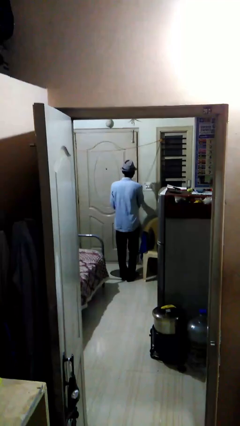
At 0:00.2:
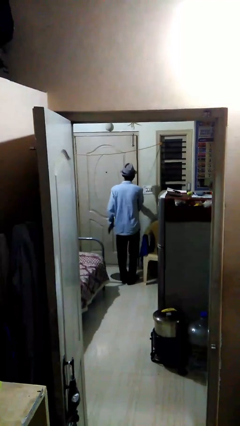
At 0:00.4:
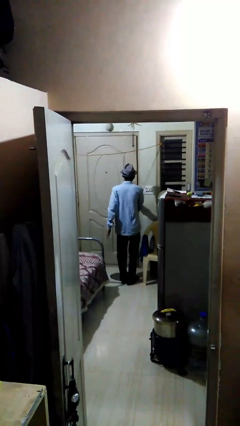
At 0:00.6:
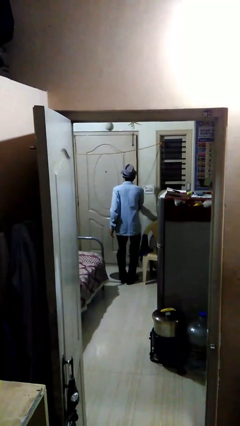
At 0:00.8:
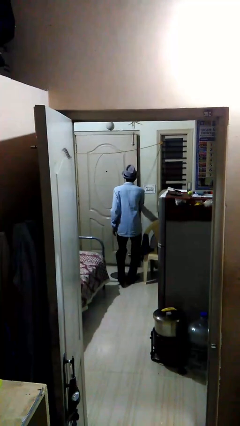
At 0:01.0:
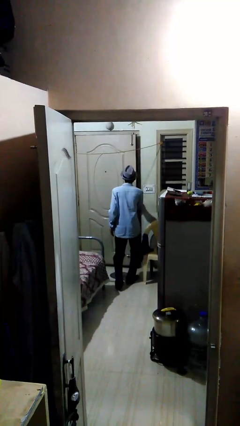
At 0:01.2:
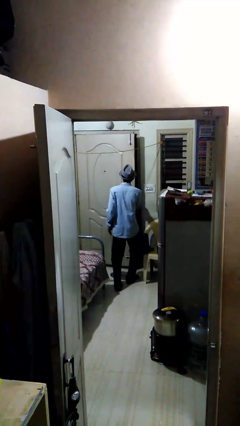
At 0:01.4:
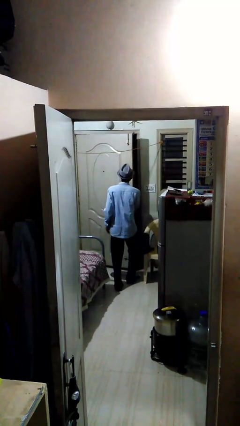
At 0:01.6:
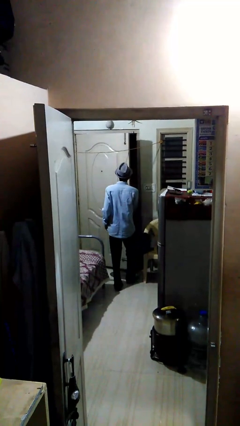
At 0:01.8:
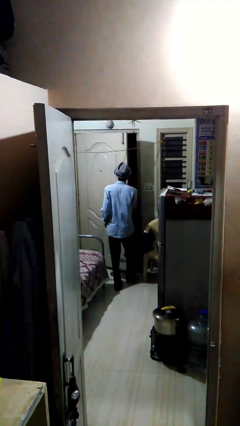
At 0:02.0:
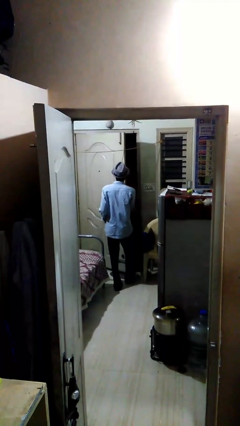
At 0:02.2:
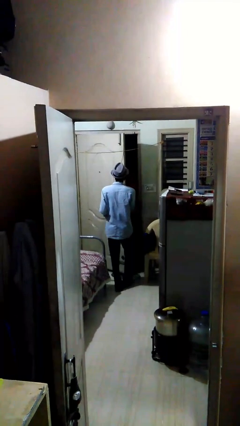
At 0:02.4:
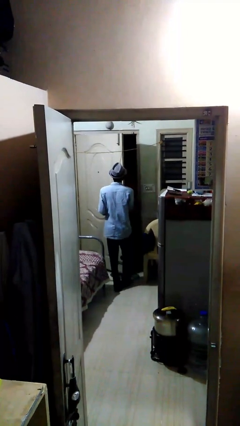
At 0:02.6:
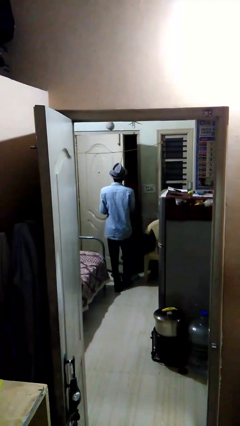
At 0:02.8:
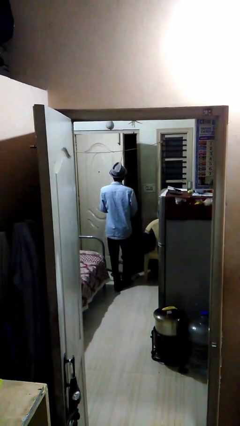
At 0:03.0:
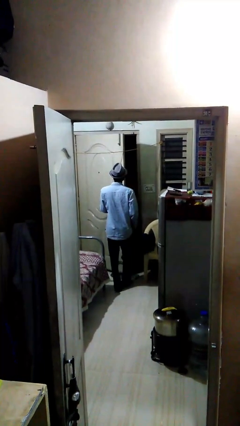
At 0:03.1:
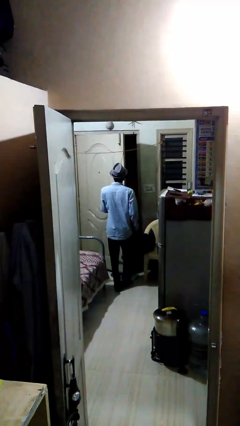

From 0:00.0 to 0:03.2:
person opens facility door

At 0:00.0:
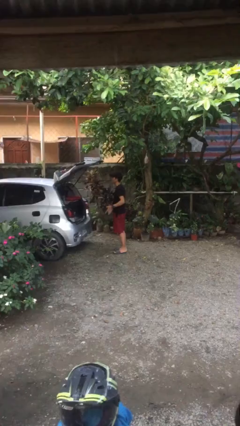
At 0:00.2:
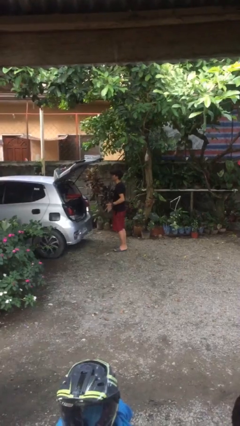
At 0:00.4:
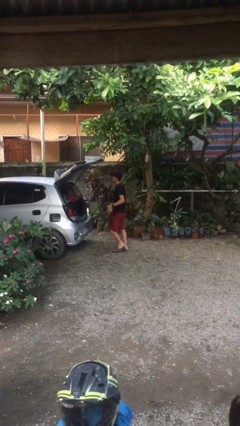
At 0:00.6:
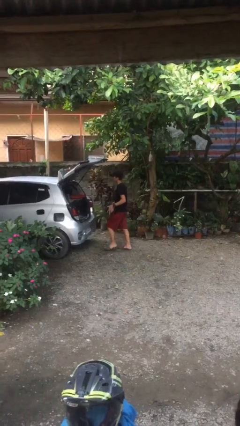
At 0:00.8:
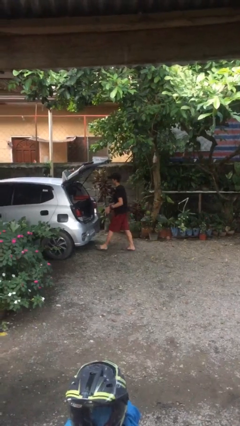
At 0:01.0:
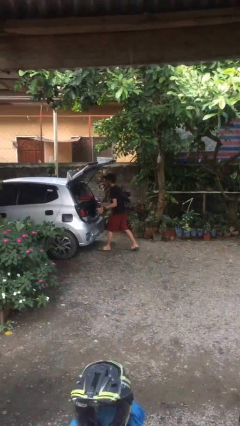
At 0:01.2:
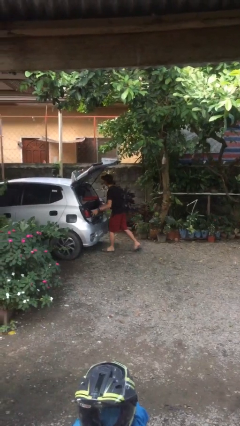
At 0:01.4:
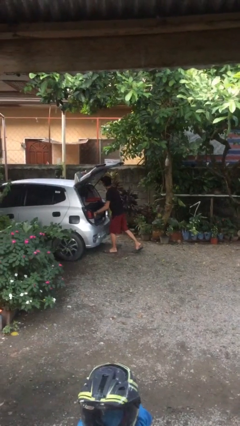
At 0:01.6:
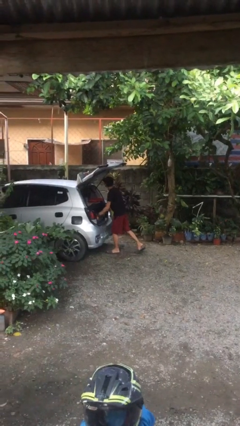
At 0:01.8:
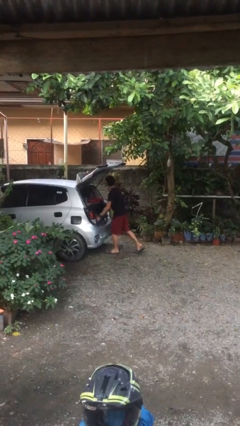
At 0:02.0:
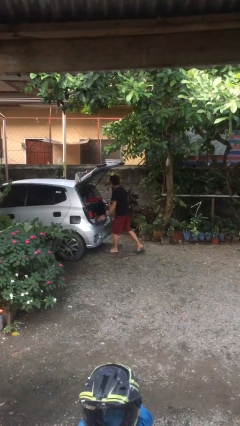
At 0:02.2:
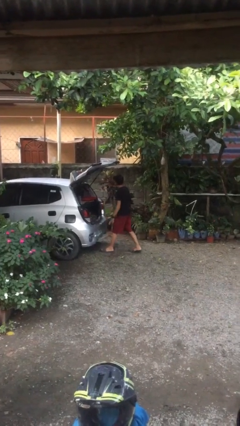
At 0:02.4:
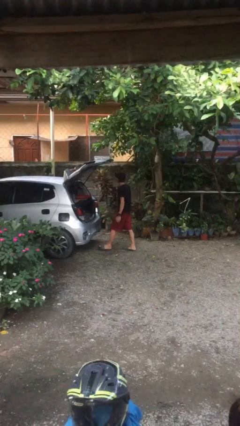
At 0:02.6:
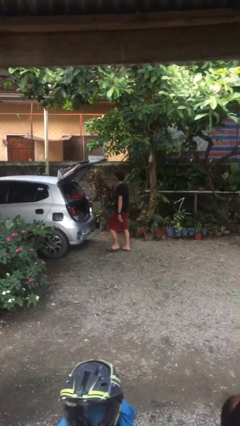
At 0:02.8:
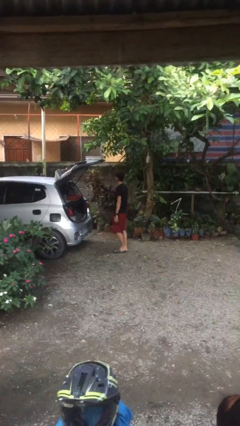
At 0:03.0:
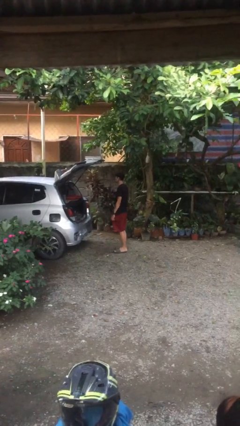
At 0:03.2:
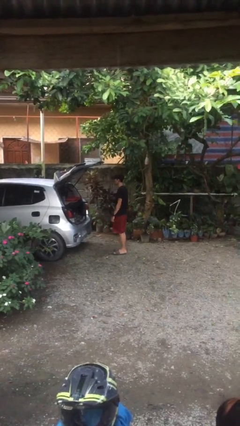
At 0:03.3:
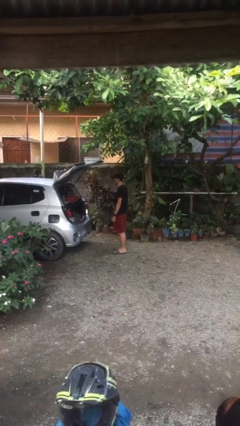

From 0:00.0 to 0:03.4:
person loads car

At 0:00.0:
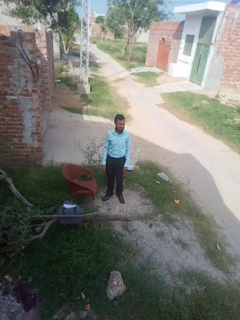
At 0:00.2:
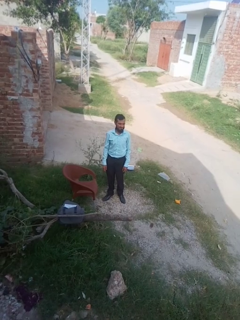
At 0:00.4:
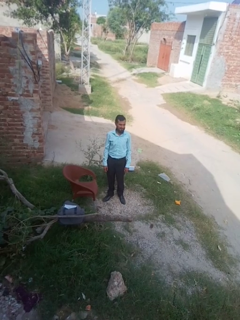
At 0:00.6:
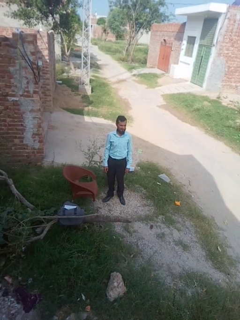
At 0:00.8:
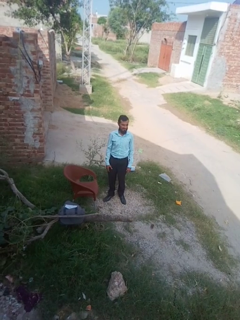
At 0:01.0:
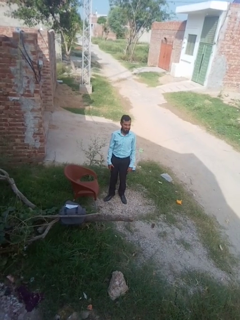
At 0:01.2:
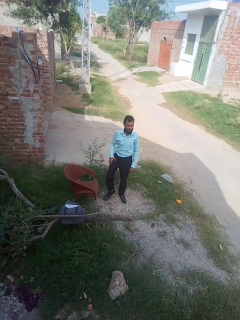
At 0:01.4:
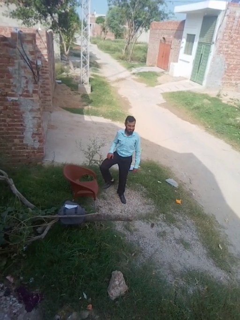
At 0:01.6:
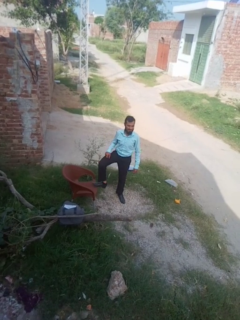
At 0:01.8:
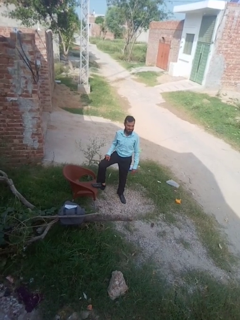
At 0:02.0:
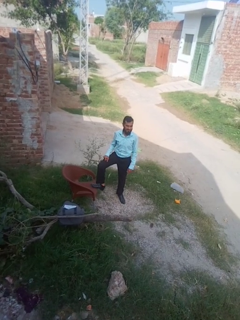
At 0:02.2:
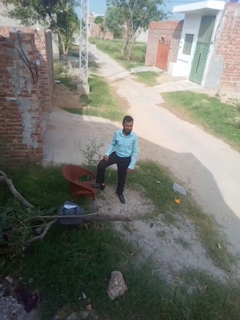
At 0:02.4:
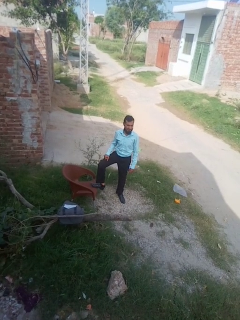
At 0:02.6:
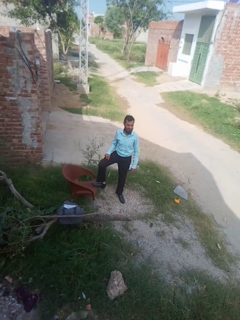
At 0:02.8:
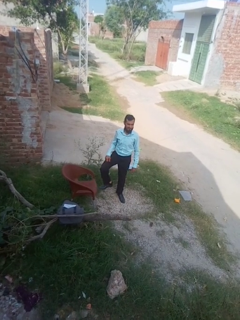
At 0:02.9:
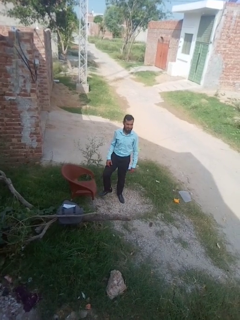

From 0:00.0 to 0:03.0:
person puts feet up

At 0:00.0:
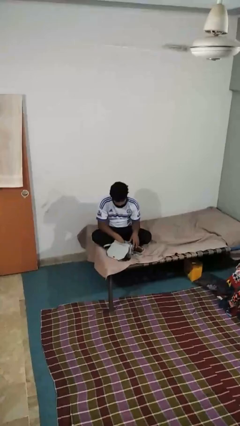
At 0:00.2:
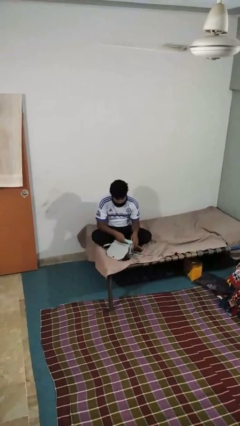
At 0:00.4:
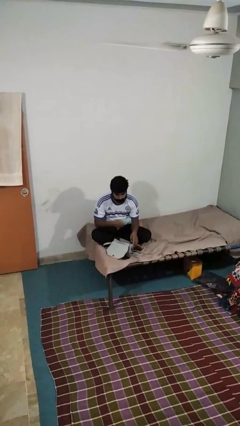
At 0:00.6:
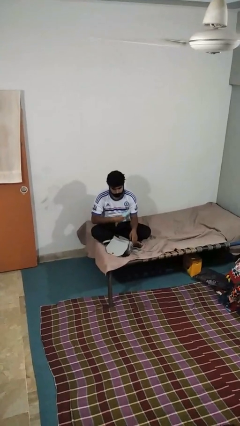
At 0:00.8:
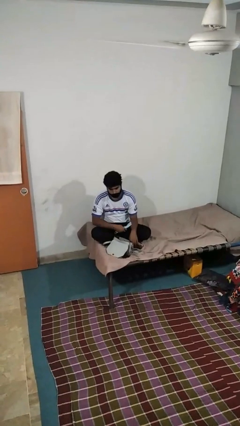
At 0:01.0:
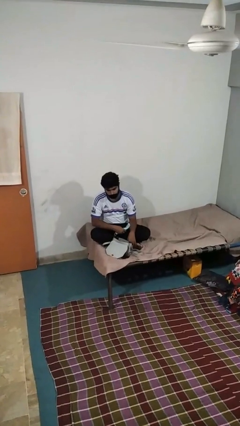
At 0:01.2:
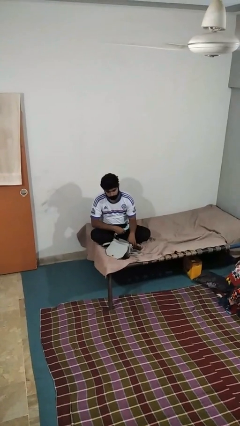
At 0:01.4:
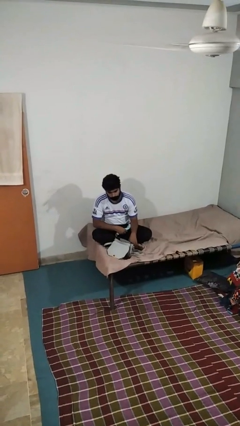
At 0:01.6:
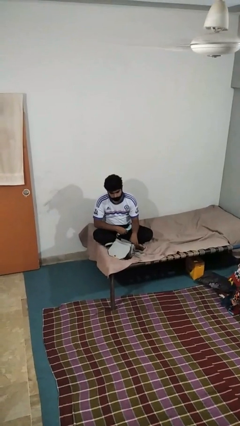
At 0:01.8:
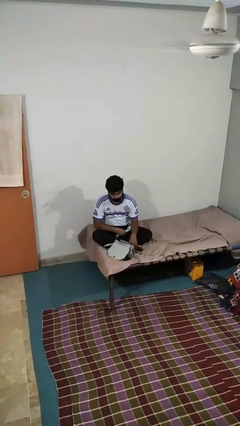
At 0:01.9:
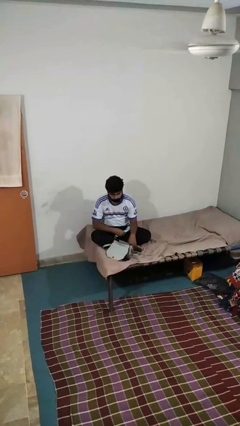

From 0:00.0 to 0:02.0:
person takes object from purse

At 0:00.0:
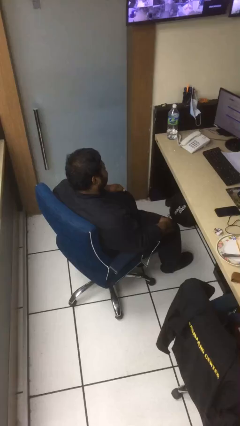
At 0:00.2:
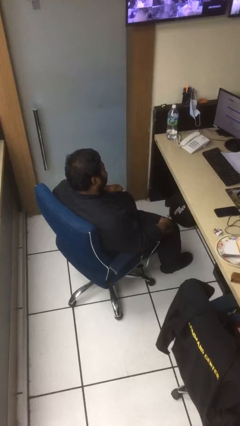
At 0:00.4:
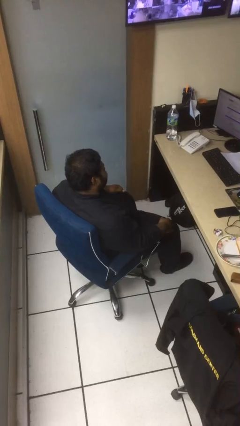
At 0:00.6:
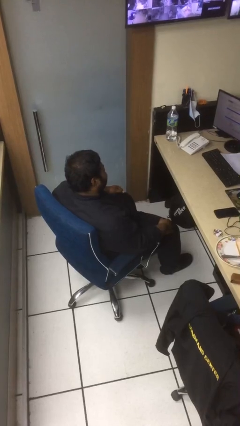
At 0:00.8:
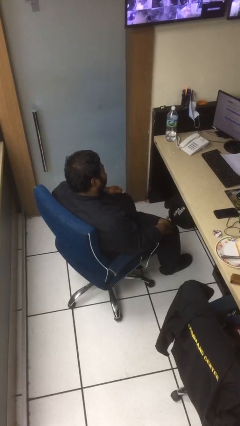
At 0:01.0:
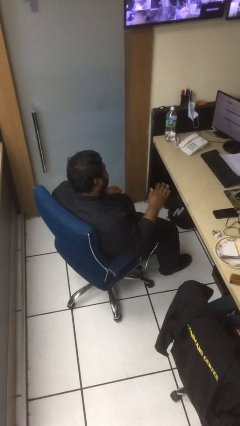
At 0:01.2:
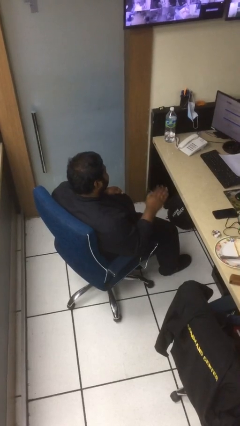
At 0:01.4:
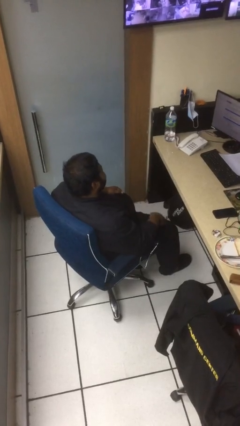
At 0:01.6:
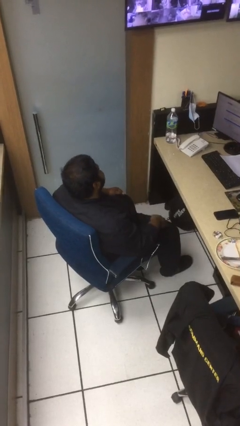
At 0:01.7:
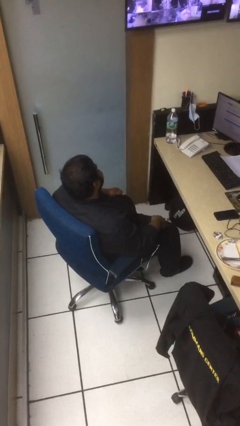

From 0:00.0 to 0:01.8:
person slaps hands on thighs

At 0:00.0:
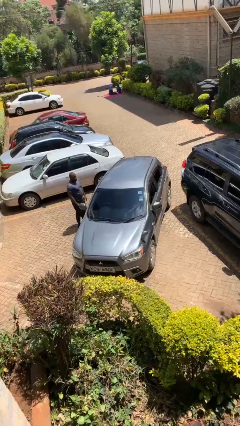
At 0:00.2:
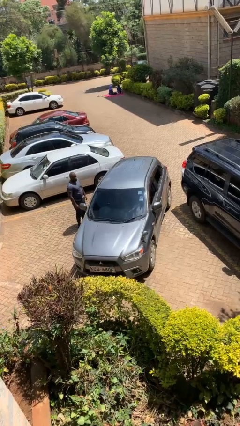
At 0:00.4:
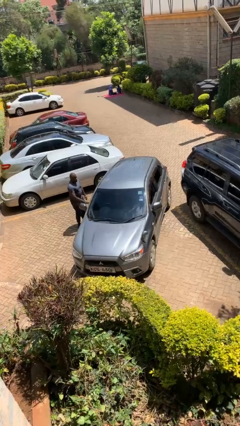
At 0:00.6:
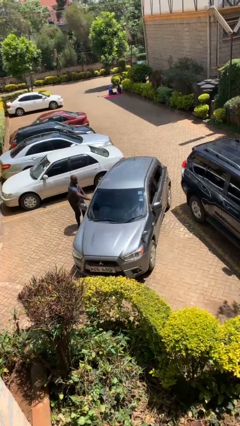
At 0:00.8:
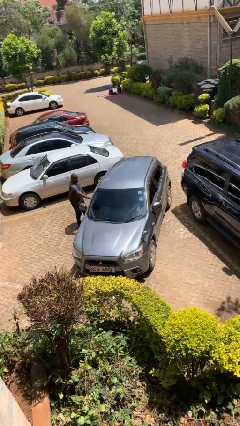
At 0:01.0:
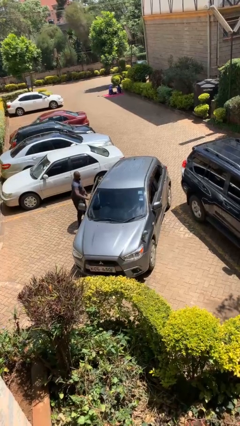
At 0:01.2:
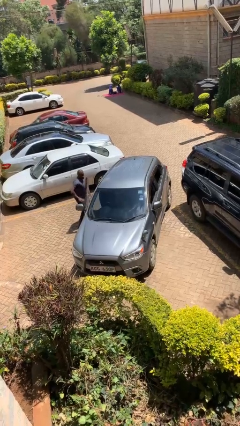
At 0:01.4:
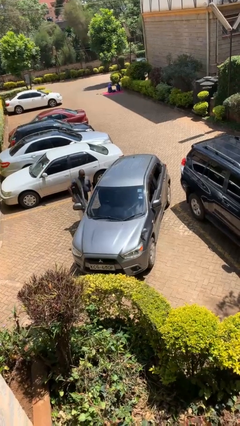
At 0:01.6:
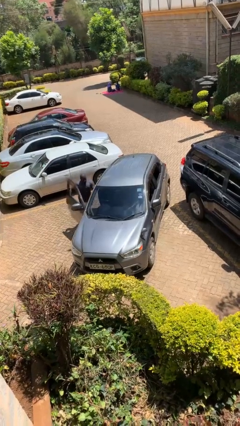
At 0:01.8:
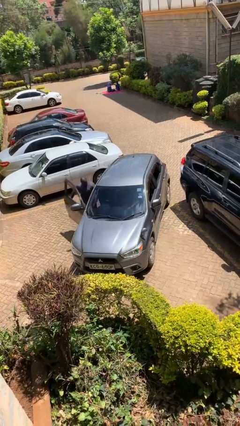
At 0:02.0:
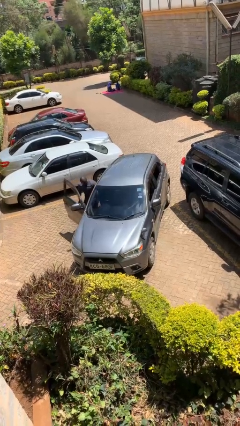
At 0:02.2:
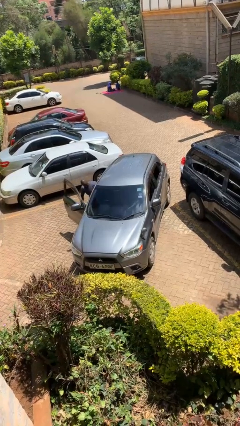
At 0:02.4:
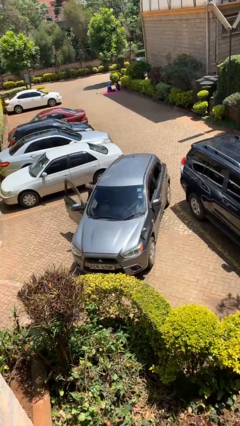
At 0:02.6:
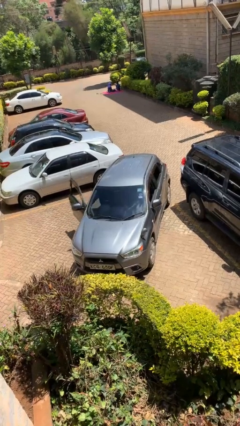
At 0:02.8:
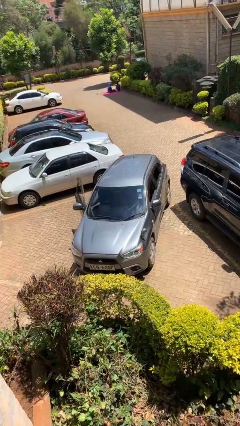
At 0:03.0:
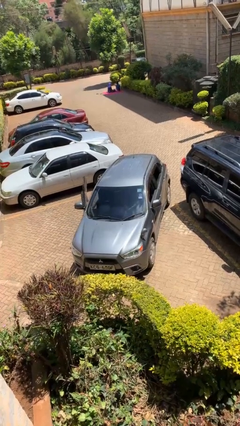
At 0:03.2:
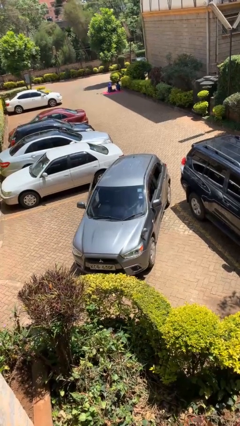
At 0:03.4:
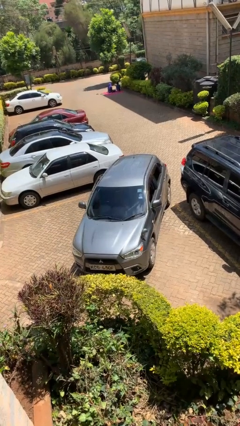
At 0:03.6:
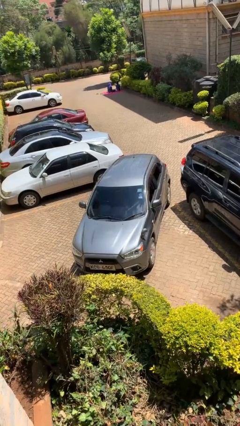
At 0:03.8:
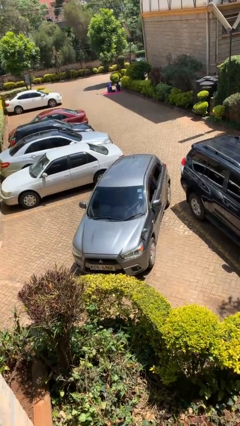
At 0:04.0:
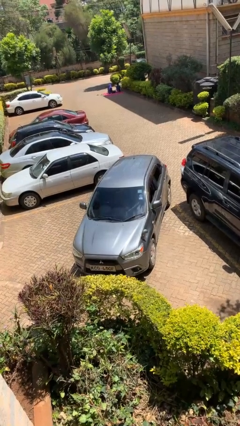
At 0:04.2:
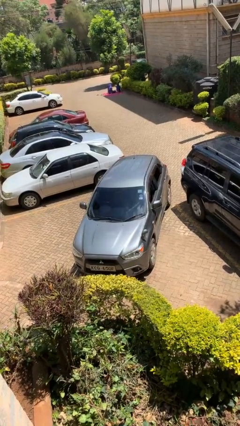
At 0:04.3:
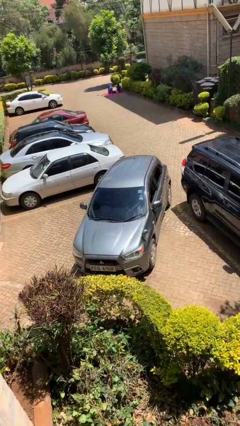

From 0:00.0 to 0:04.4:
car picks up person
